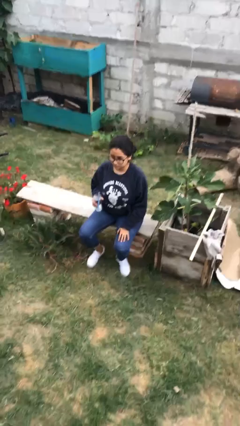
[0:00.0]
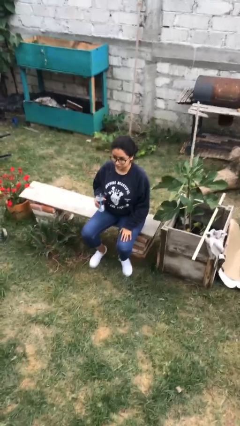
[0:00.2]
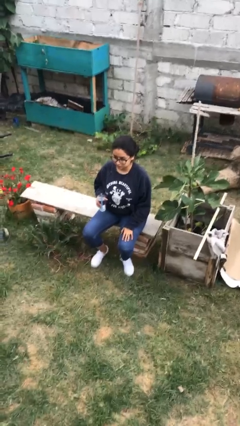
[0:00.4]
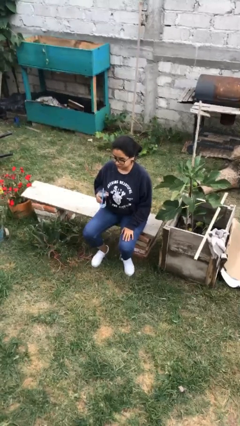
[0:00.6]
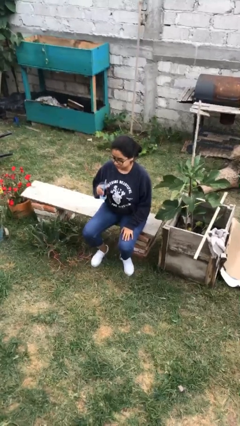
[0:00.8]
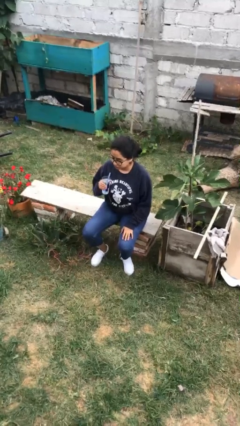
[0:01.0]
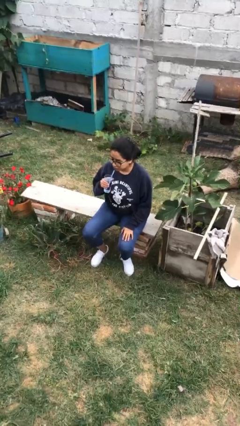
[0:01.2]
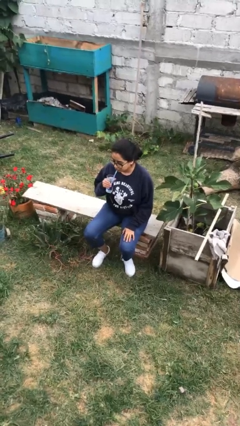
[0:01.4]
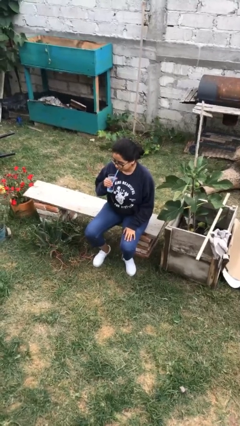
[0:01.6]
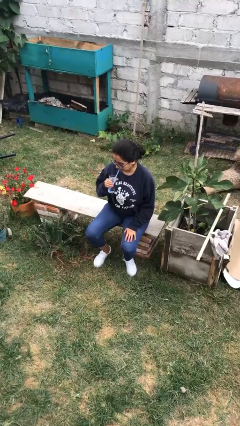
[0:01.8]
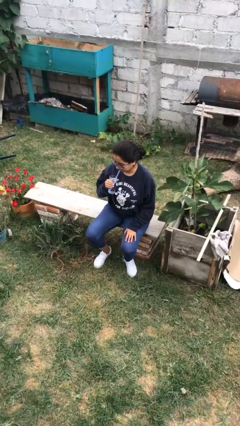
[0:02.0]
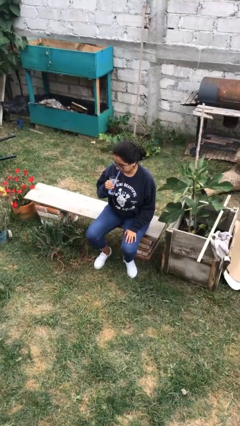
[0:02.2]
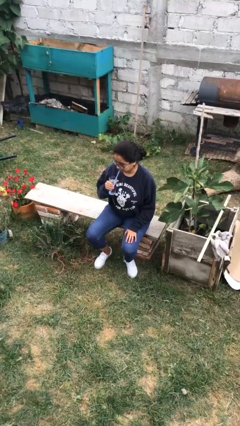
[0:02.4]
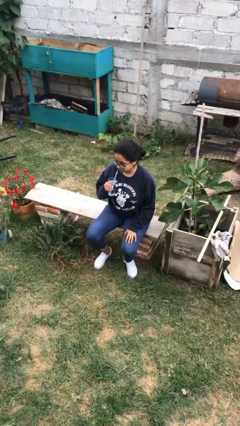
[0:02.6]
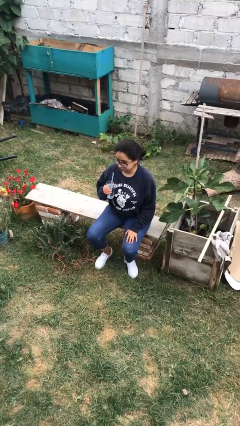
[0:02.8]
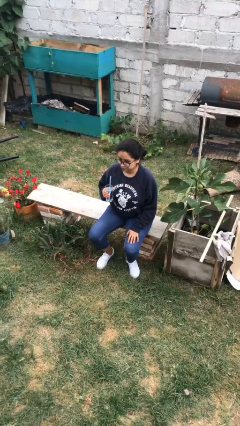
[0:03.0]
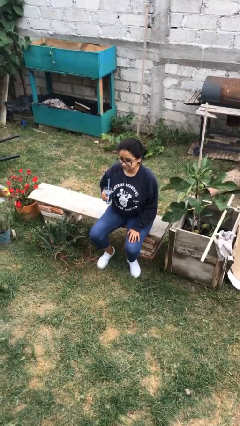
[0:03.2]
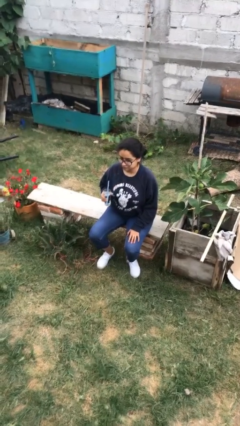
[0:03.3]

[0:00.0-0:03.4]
person drinks from straw

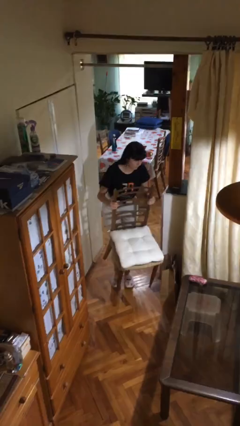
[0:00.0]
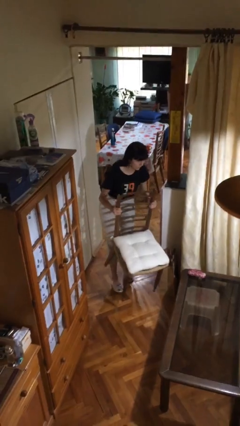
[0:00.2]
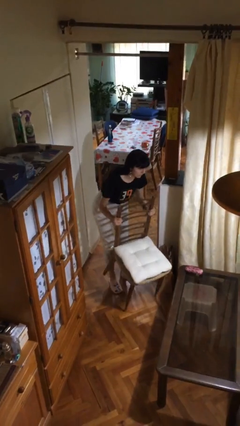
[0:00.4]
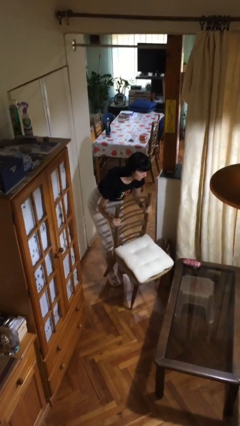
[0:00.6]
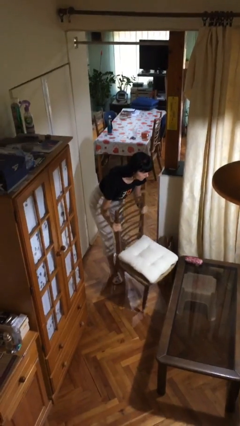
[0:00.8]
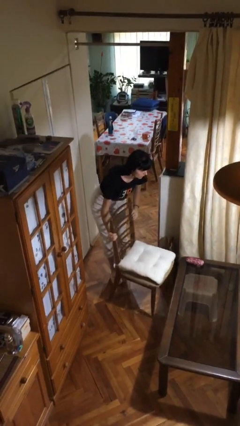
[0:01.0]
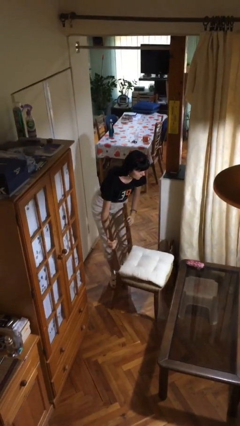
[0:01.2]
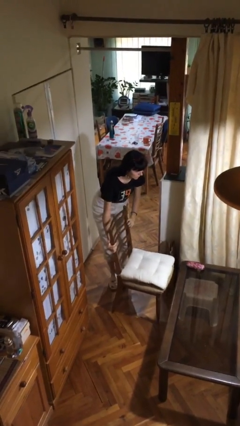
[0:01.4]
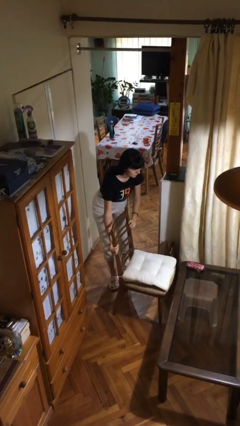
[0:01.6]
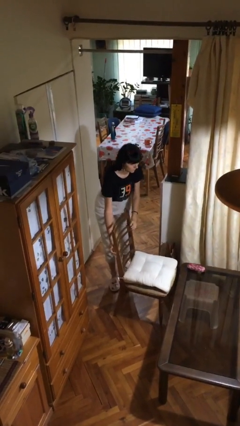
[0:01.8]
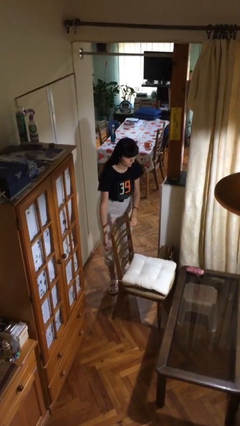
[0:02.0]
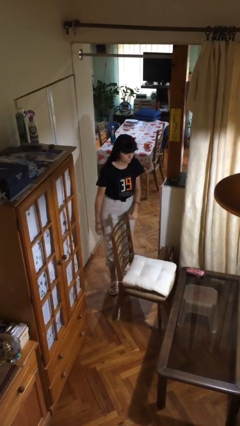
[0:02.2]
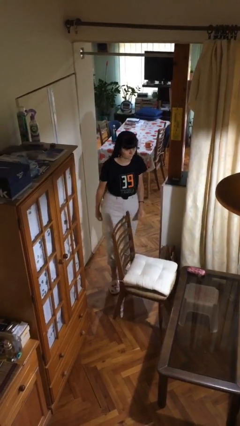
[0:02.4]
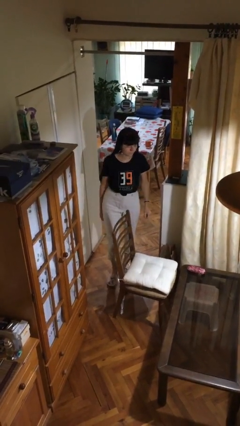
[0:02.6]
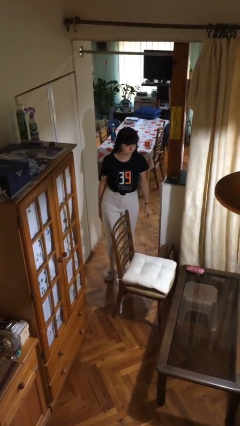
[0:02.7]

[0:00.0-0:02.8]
person puts down object on floor

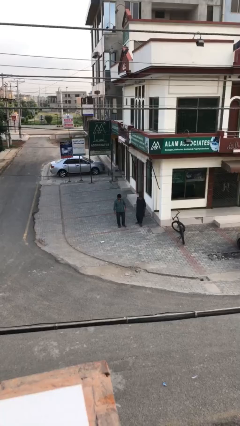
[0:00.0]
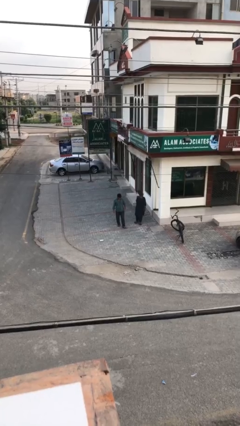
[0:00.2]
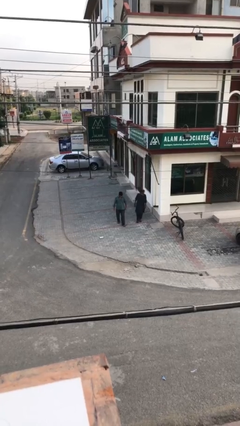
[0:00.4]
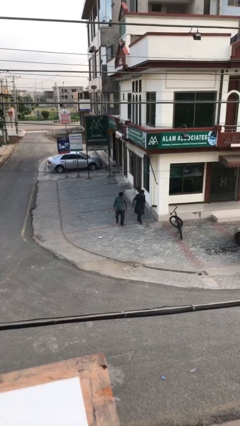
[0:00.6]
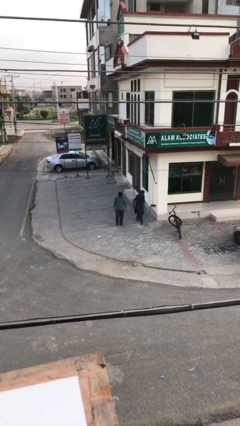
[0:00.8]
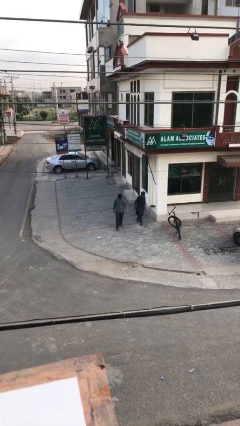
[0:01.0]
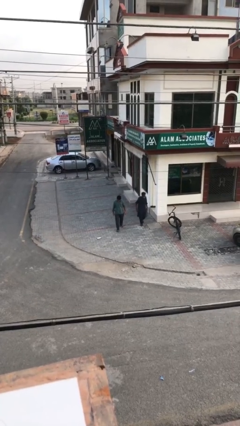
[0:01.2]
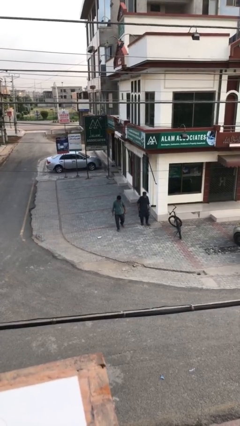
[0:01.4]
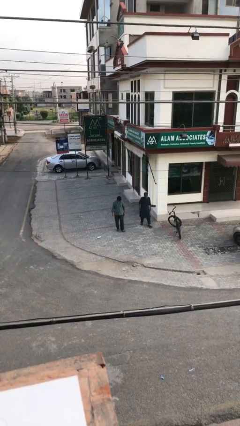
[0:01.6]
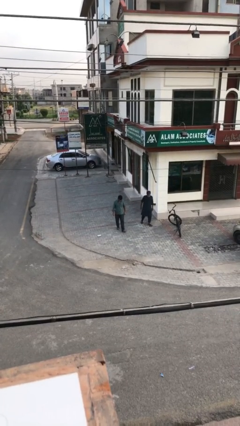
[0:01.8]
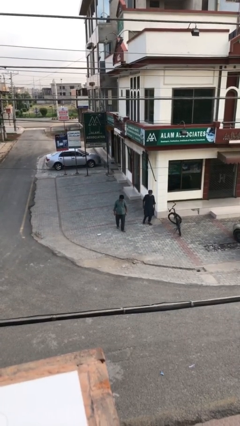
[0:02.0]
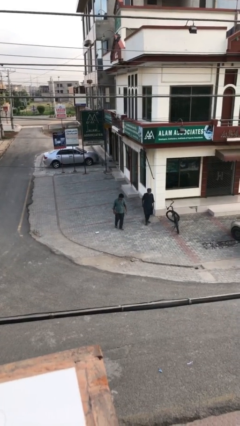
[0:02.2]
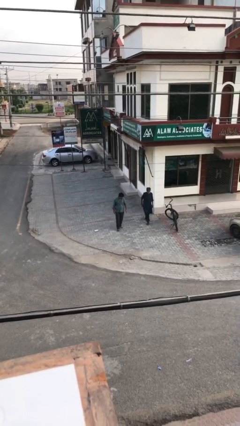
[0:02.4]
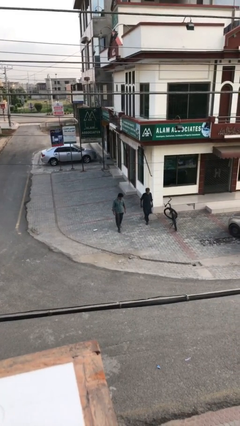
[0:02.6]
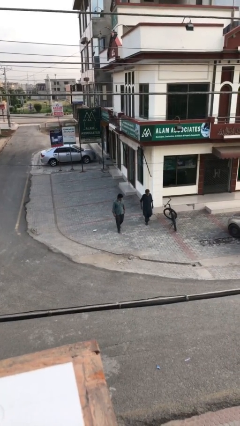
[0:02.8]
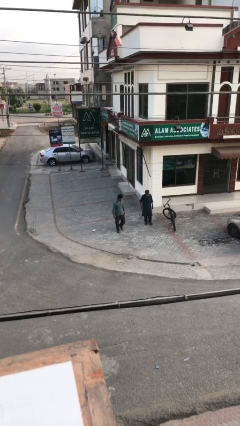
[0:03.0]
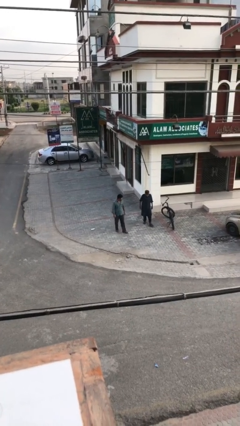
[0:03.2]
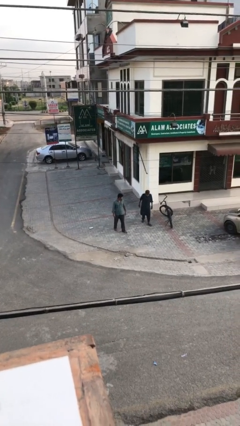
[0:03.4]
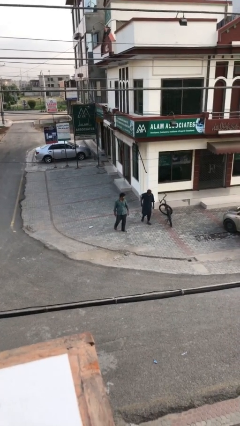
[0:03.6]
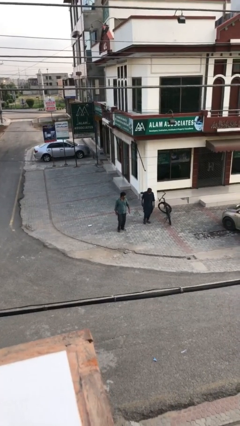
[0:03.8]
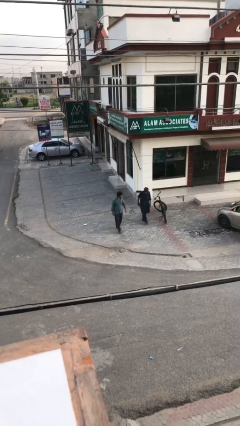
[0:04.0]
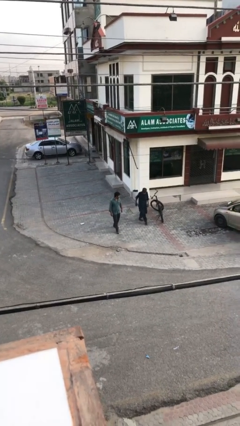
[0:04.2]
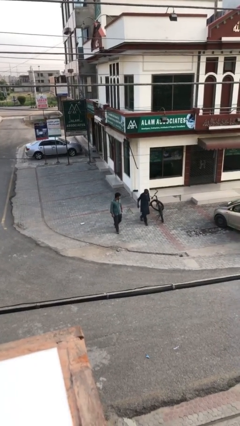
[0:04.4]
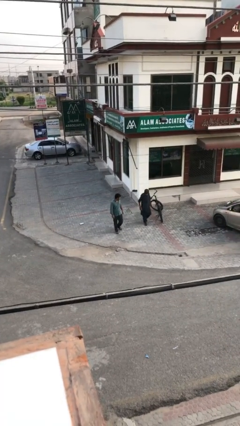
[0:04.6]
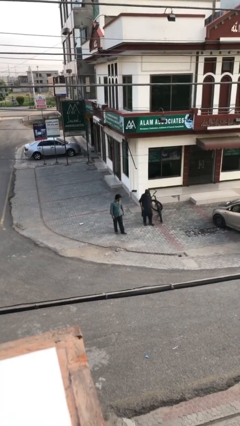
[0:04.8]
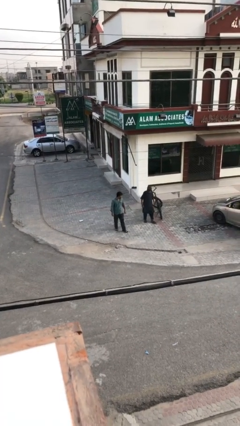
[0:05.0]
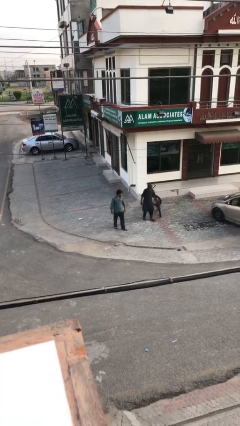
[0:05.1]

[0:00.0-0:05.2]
person talks to person

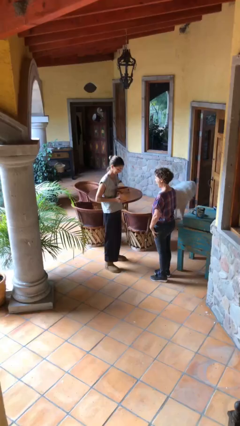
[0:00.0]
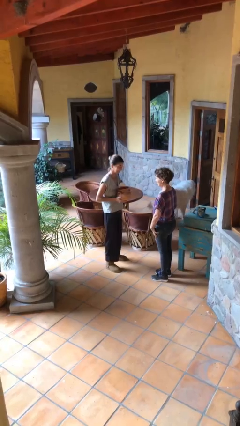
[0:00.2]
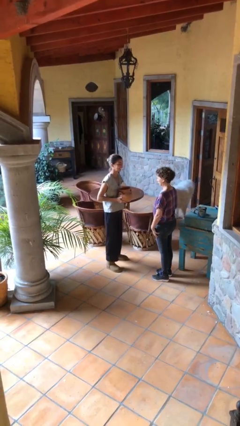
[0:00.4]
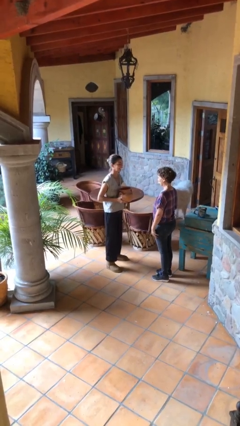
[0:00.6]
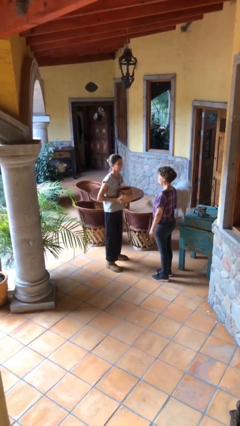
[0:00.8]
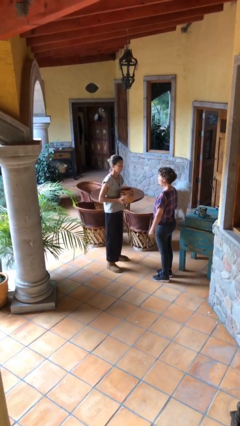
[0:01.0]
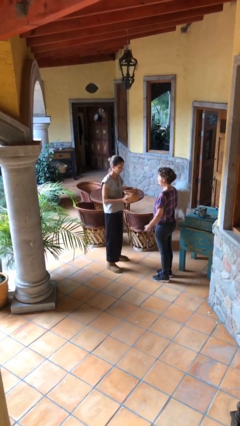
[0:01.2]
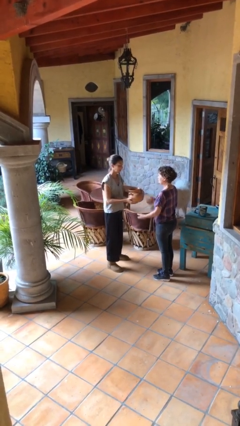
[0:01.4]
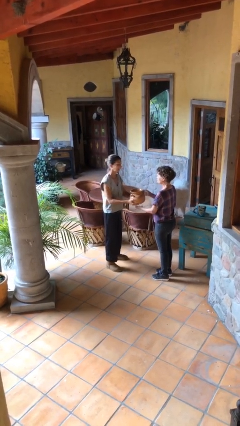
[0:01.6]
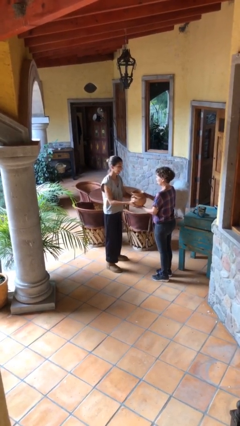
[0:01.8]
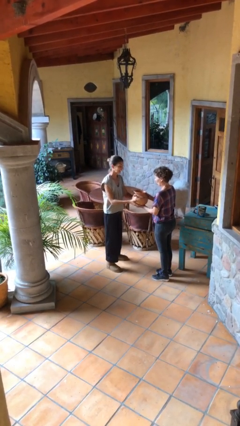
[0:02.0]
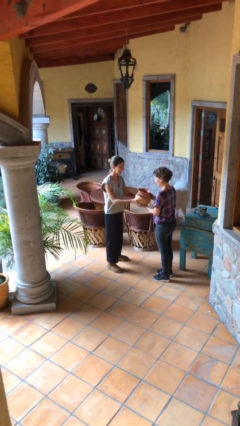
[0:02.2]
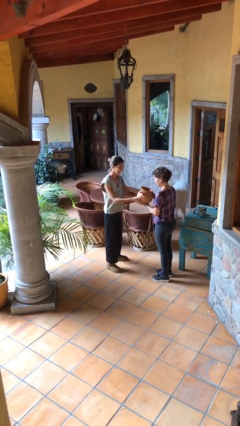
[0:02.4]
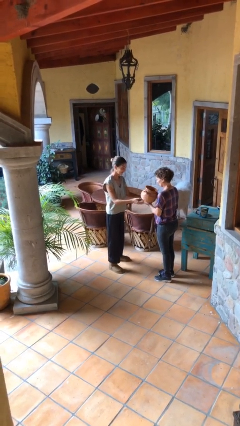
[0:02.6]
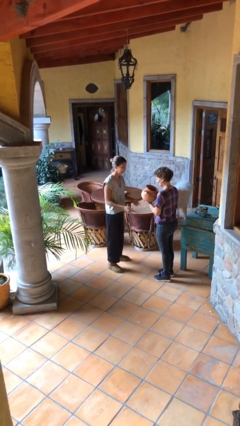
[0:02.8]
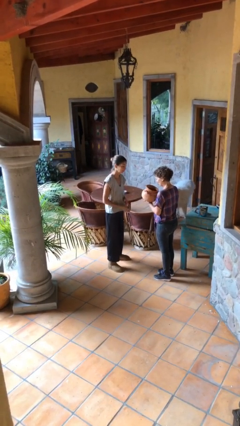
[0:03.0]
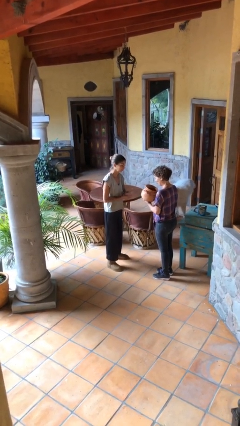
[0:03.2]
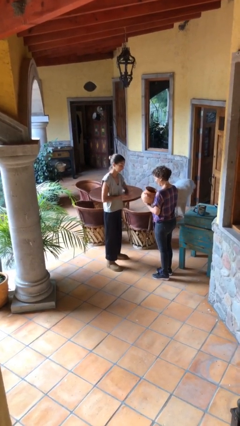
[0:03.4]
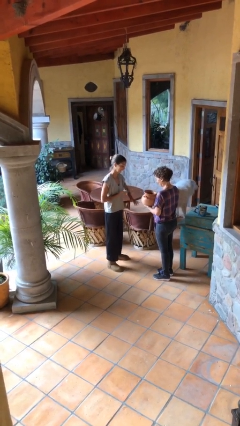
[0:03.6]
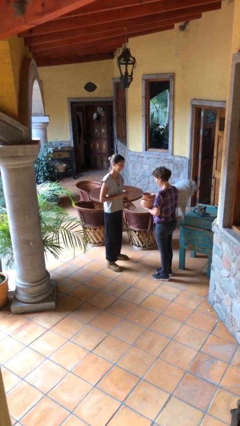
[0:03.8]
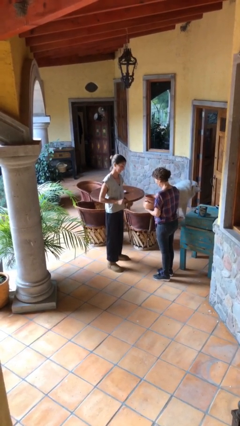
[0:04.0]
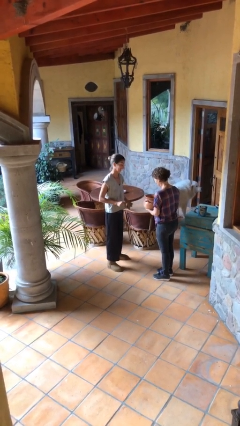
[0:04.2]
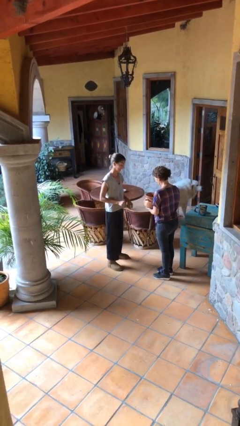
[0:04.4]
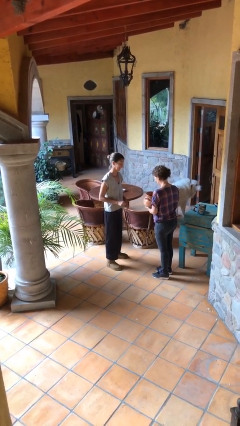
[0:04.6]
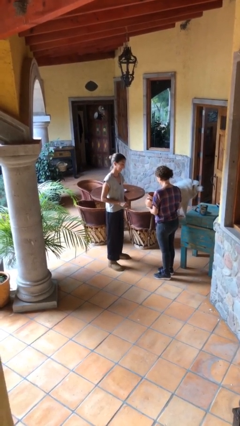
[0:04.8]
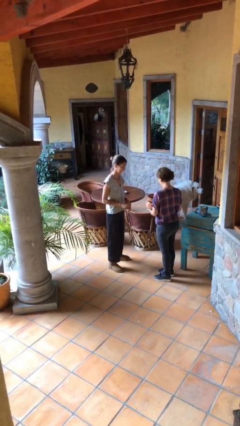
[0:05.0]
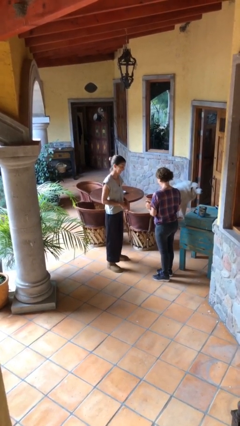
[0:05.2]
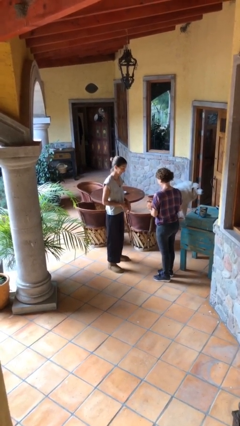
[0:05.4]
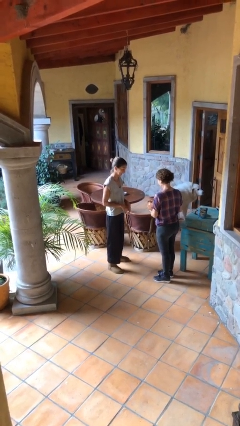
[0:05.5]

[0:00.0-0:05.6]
person transfers object to person

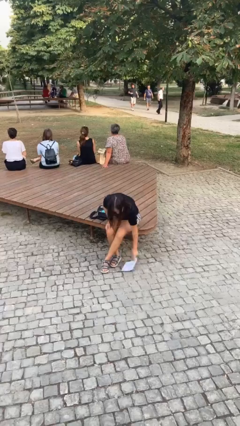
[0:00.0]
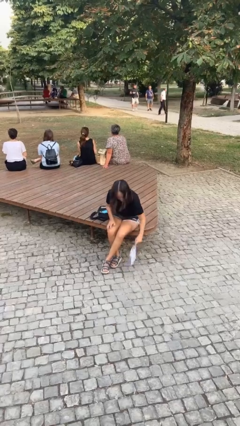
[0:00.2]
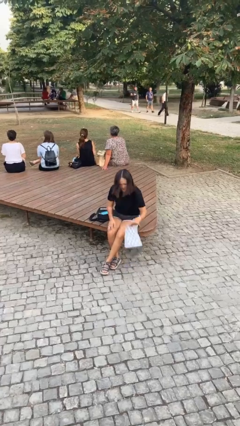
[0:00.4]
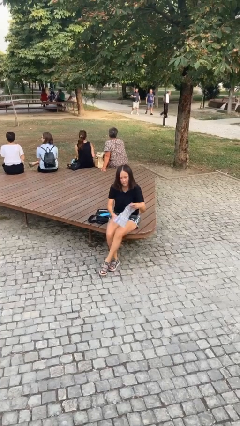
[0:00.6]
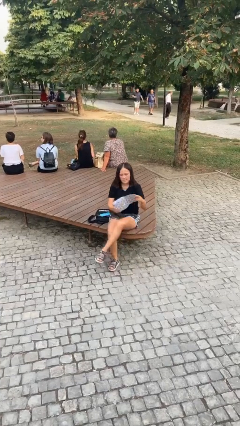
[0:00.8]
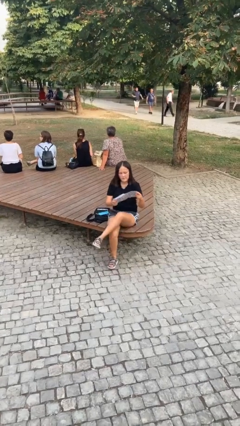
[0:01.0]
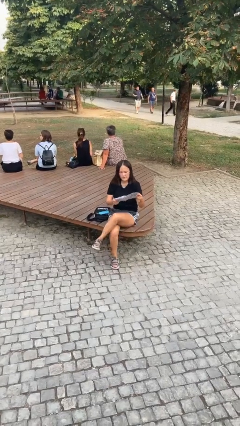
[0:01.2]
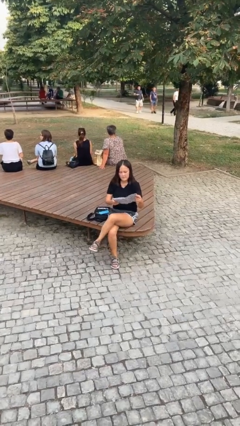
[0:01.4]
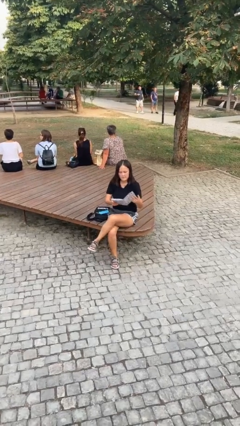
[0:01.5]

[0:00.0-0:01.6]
person picks up object from floor
